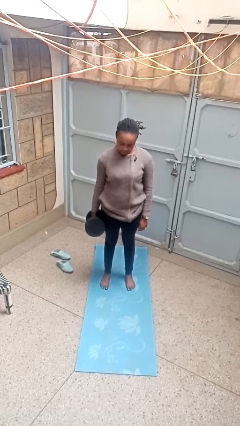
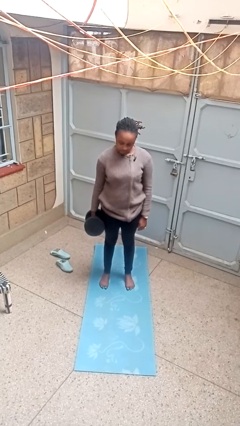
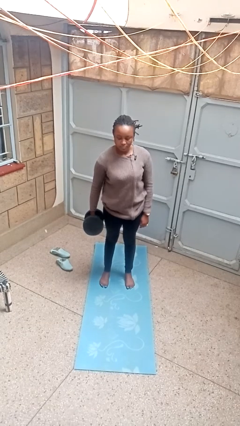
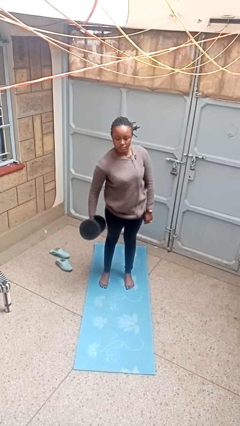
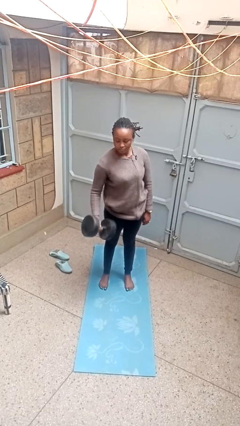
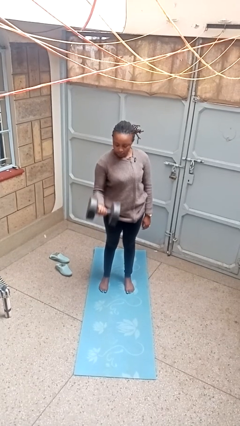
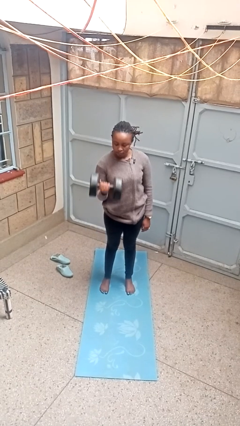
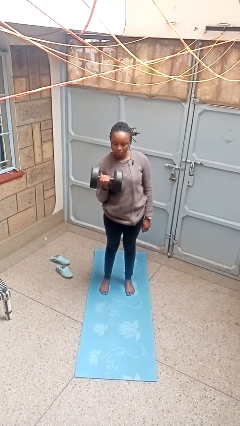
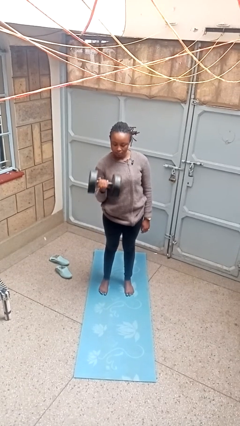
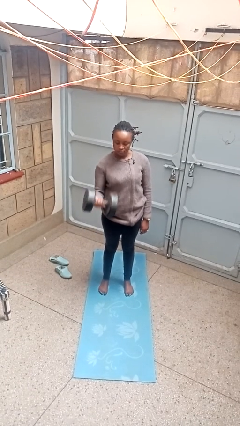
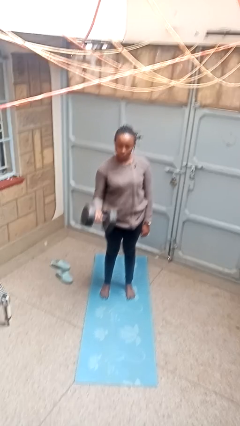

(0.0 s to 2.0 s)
person lifts dumbbells

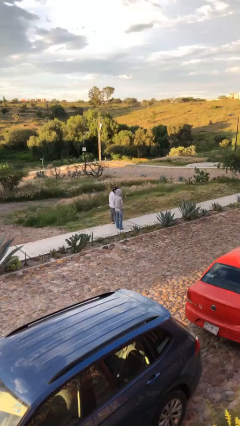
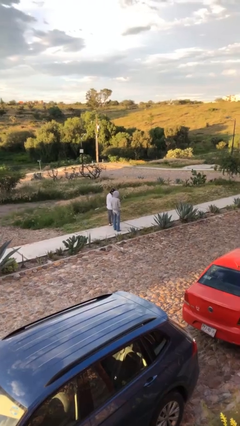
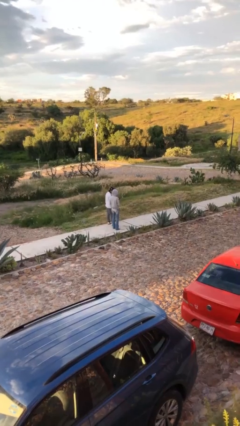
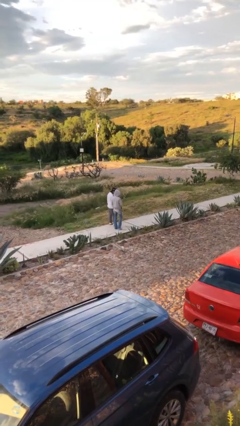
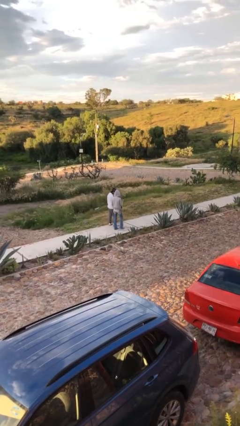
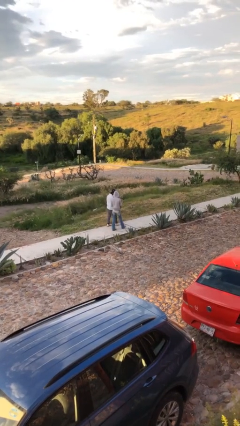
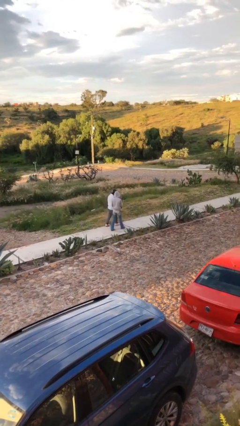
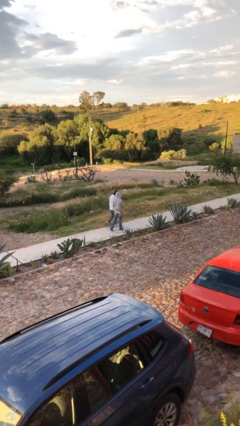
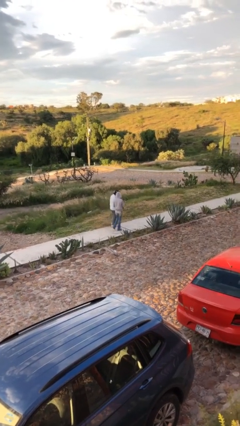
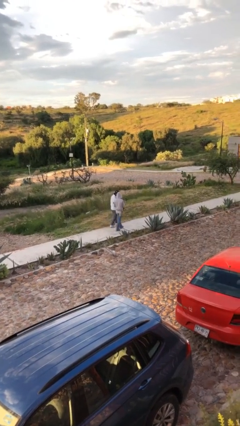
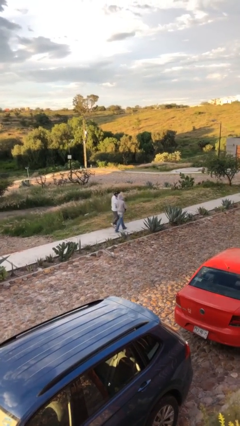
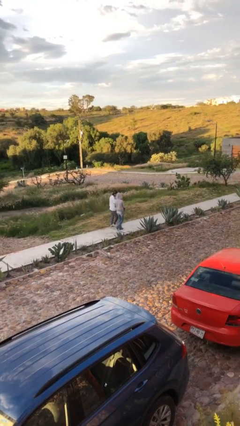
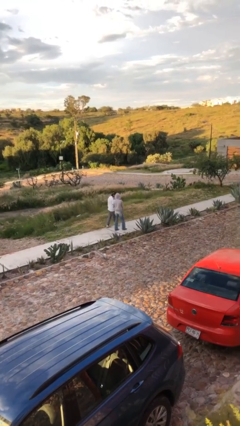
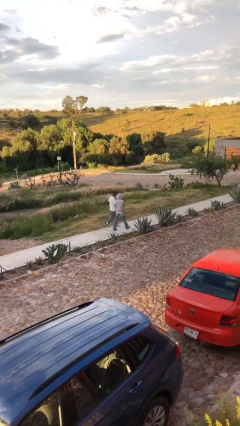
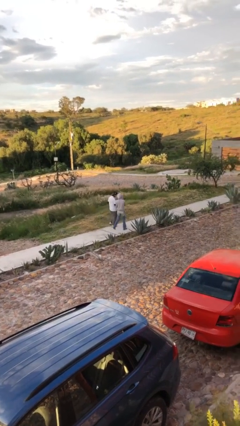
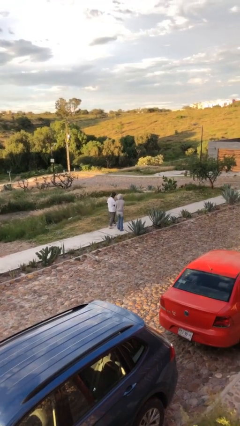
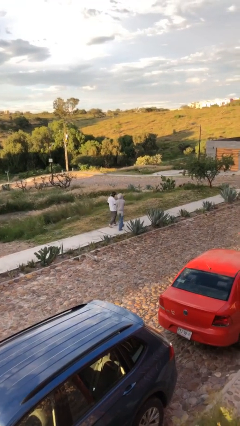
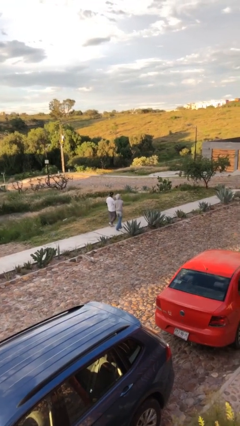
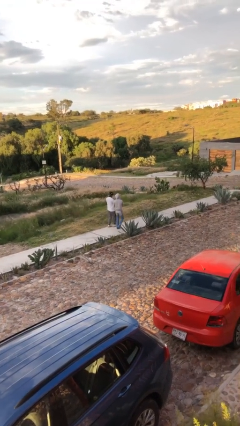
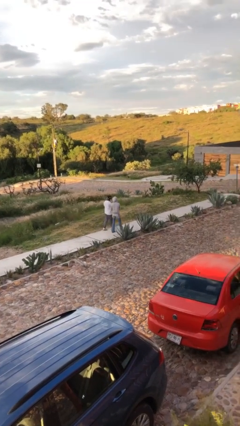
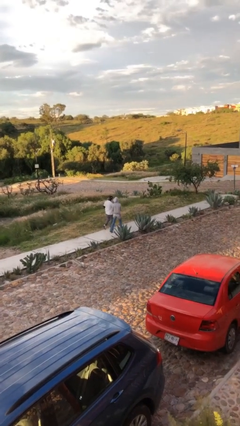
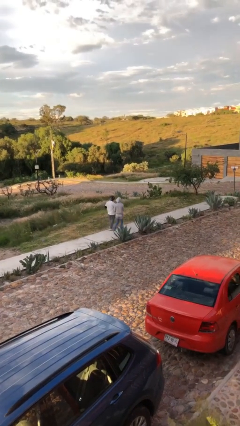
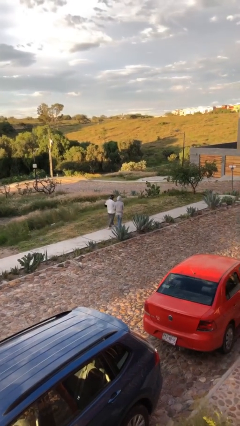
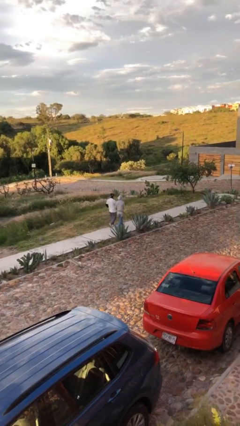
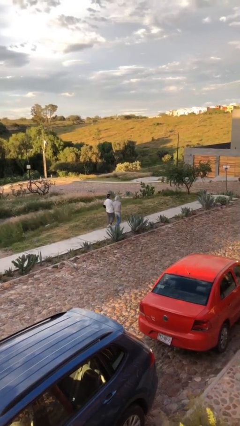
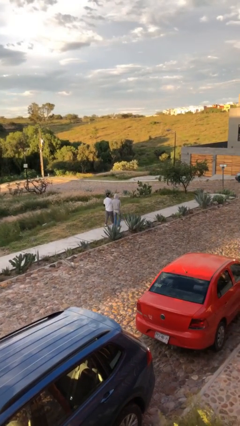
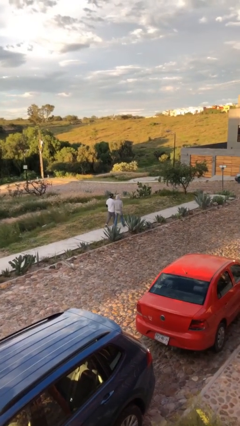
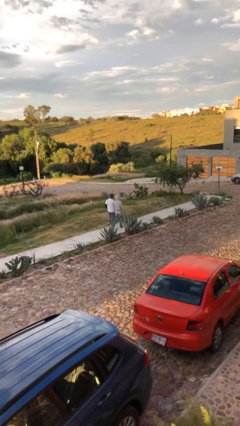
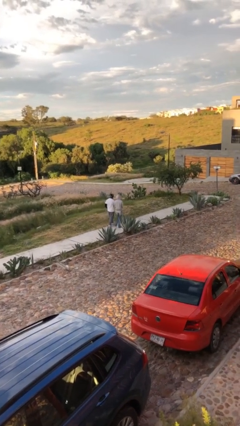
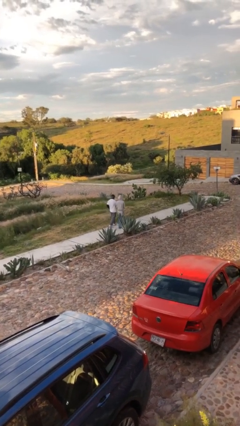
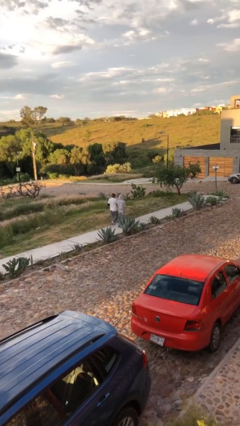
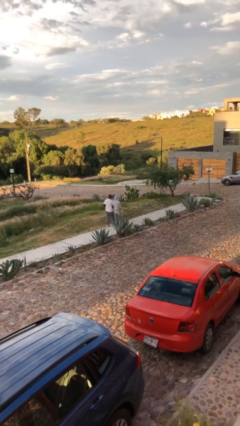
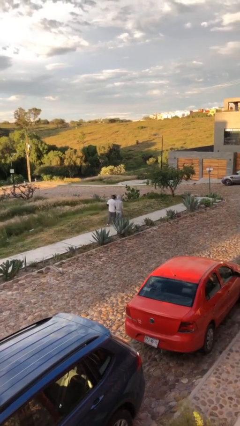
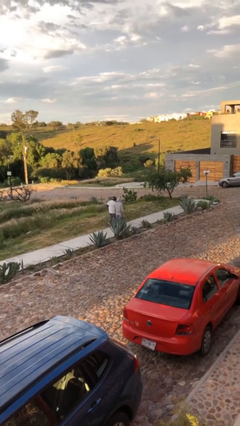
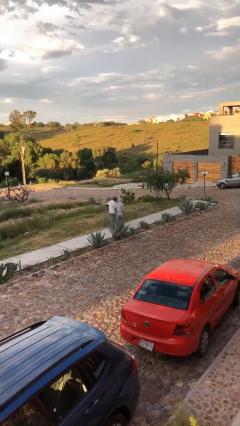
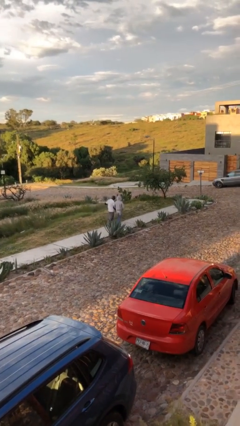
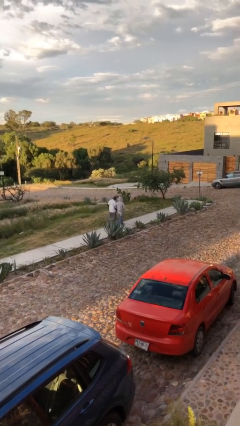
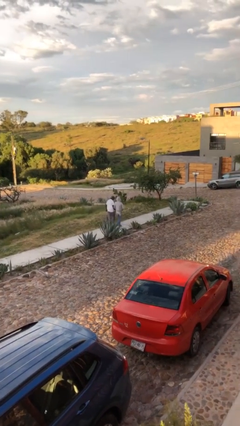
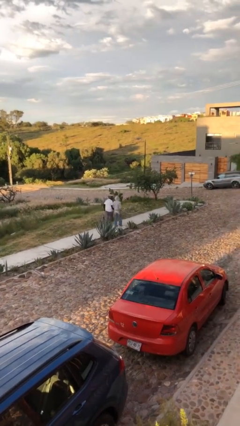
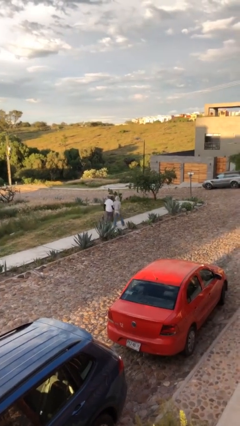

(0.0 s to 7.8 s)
person talks to person

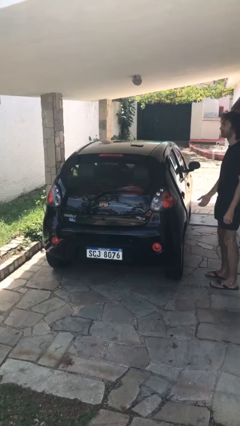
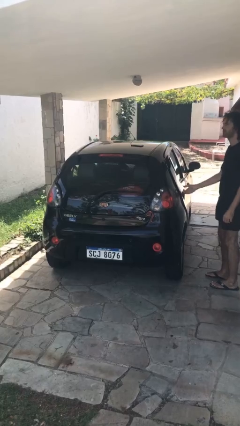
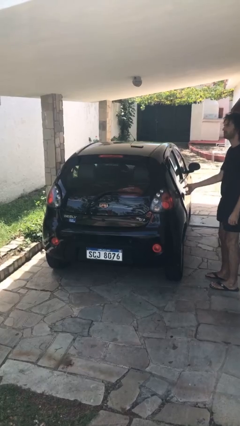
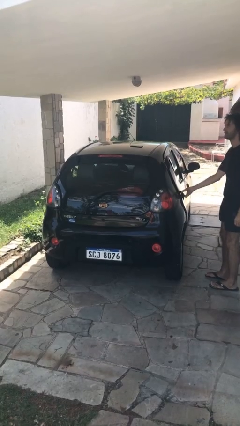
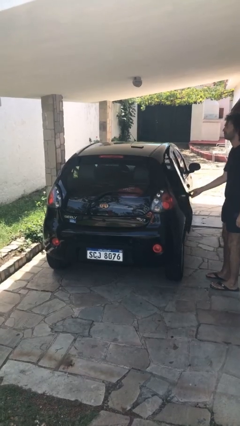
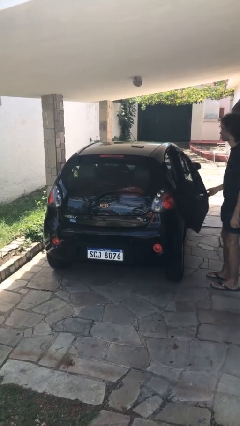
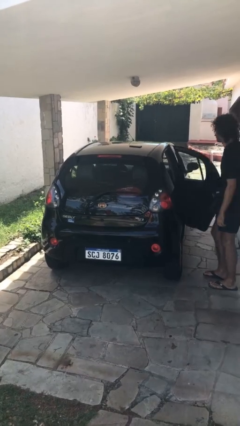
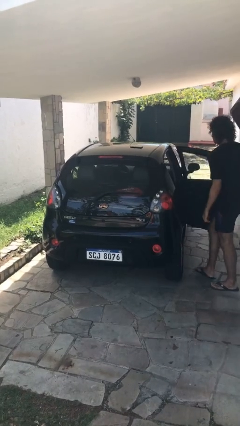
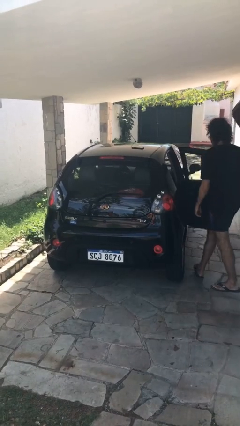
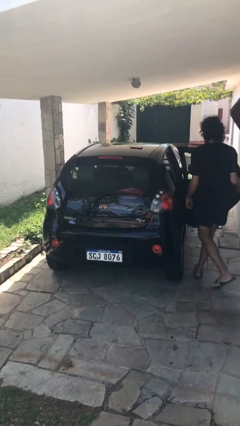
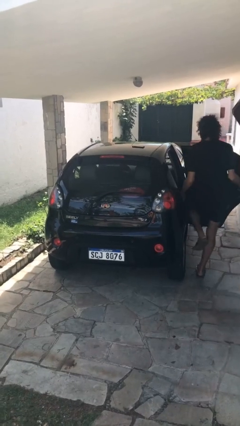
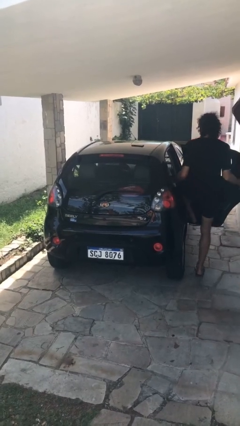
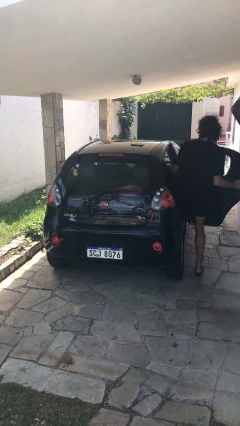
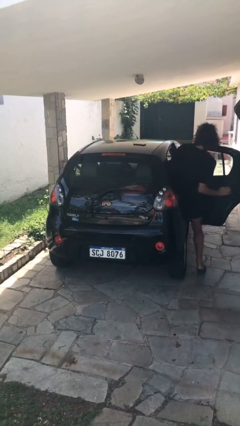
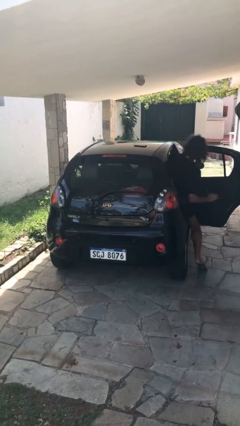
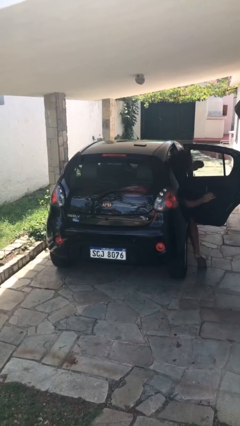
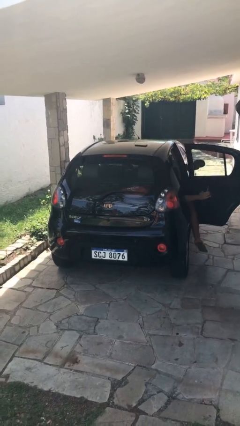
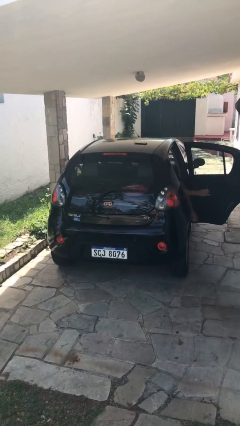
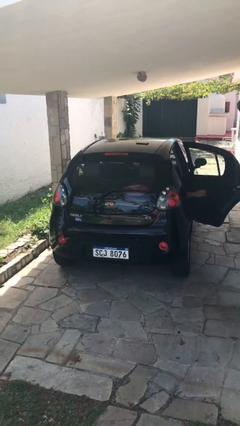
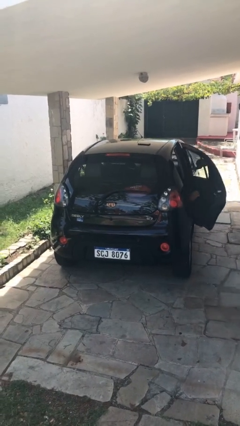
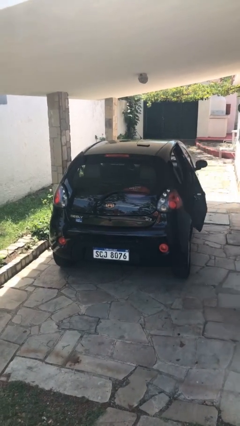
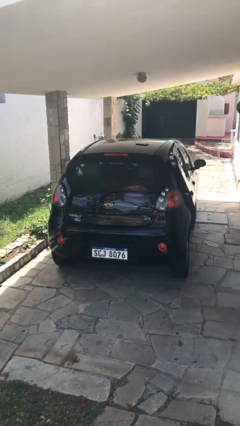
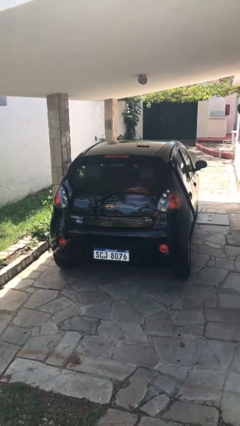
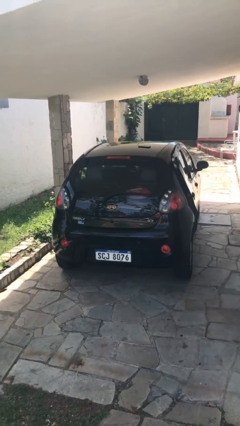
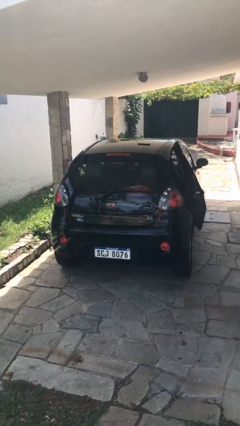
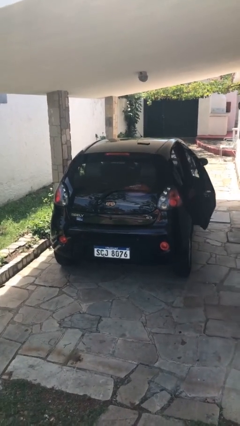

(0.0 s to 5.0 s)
car picks up person

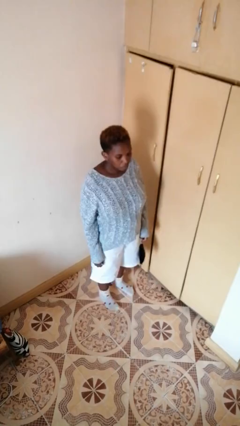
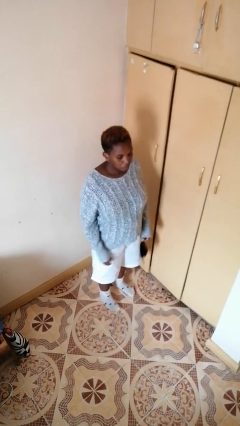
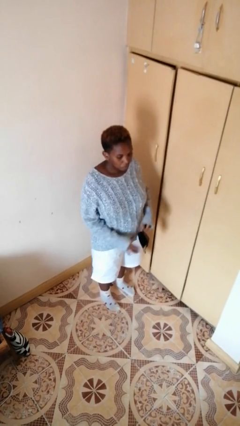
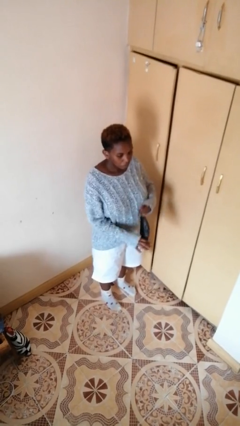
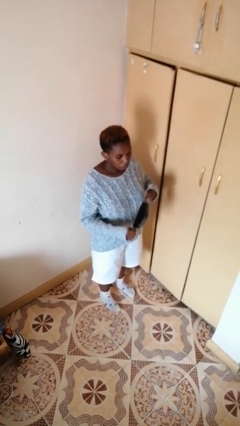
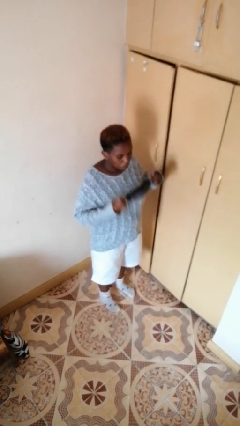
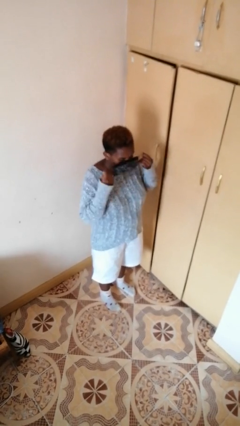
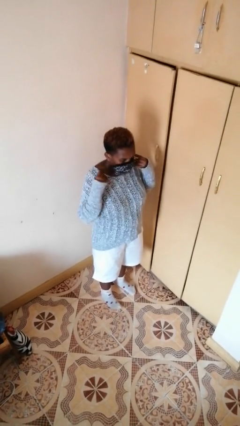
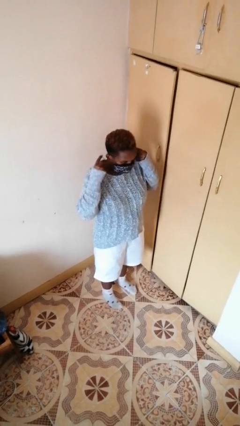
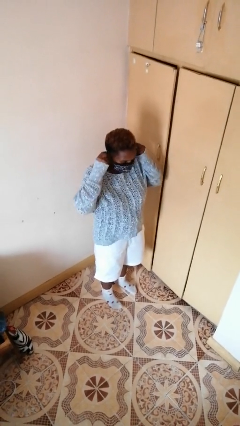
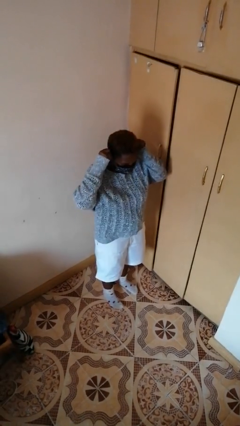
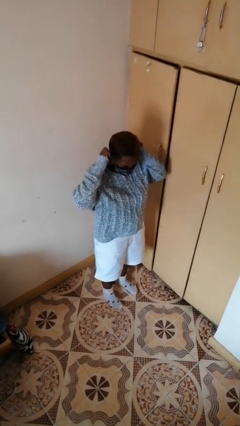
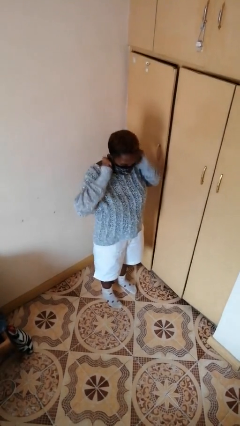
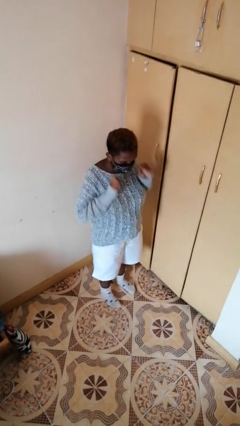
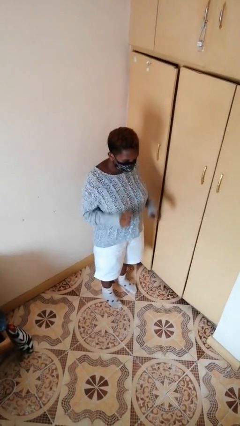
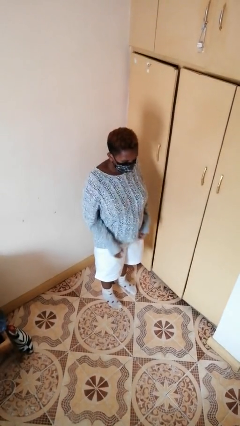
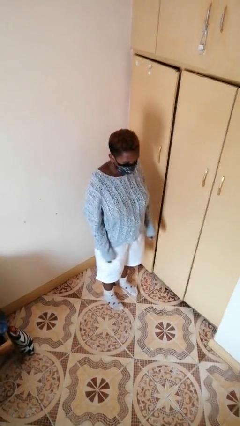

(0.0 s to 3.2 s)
person puts on facemask
